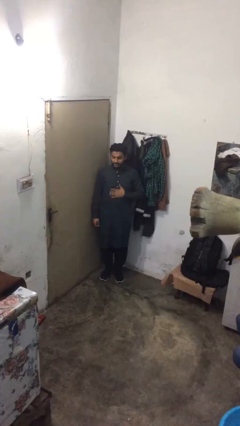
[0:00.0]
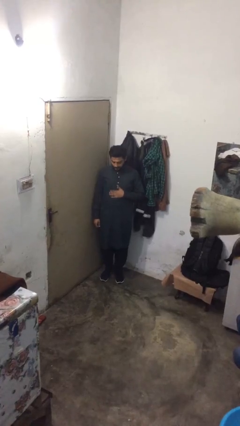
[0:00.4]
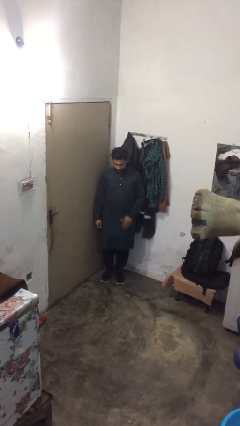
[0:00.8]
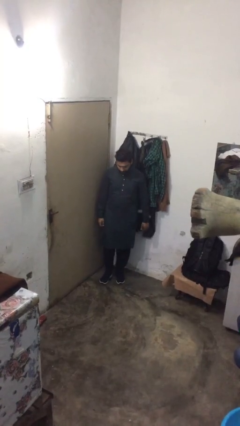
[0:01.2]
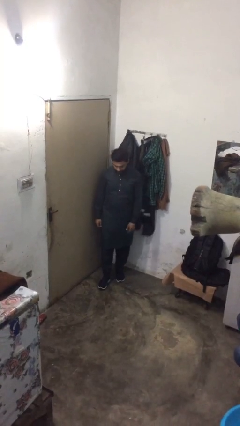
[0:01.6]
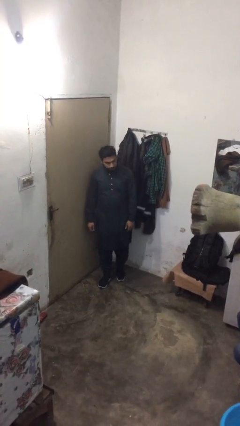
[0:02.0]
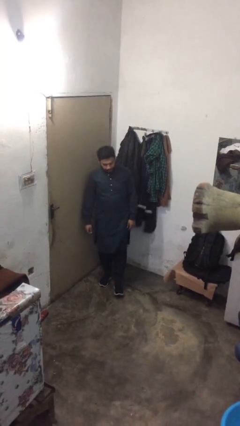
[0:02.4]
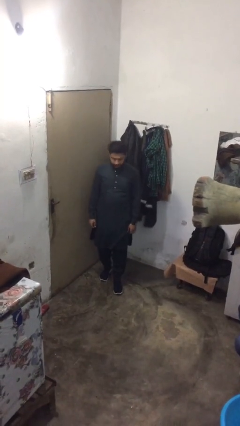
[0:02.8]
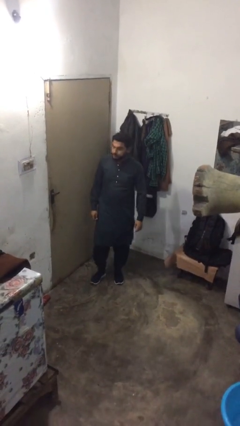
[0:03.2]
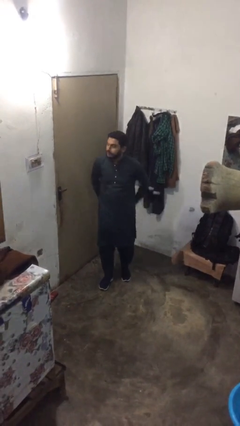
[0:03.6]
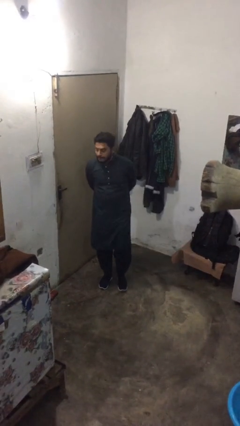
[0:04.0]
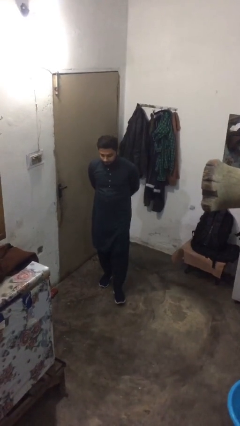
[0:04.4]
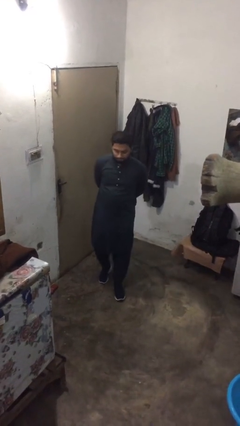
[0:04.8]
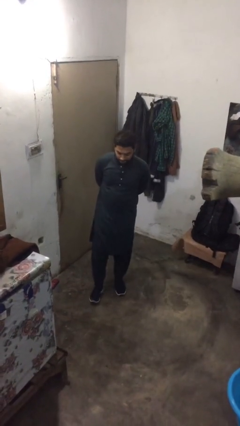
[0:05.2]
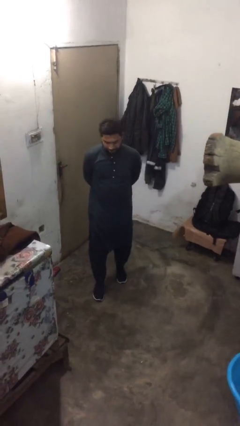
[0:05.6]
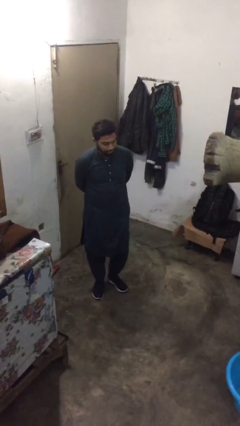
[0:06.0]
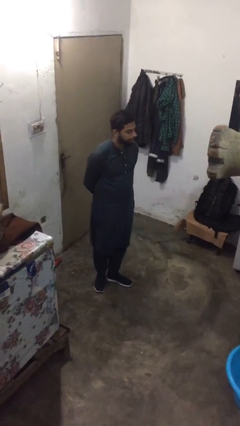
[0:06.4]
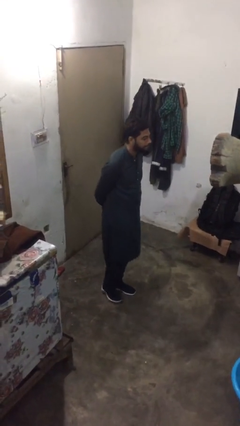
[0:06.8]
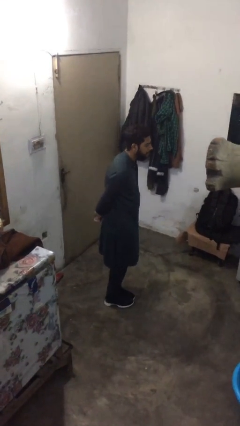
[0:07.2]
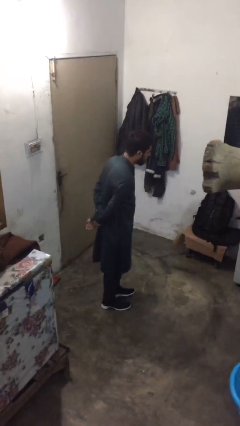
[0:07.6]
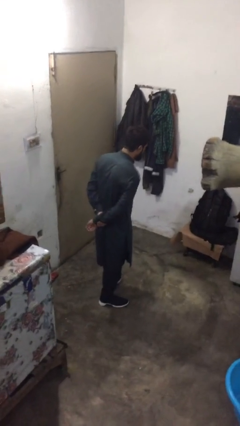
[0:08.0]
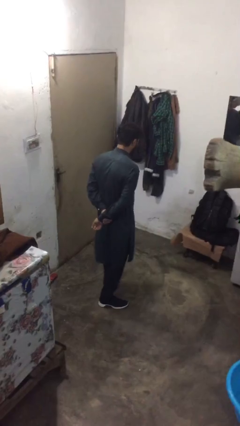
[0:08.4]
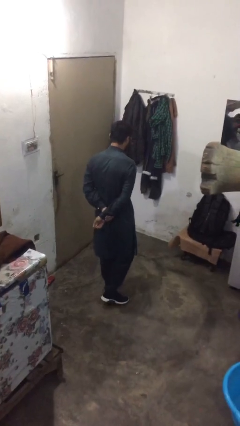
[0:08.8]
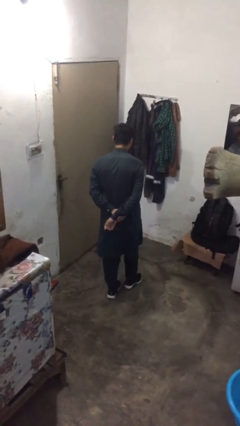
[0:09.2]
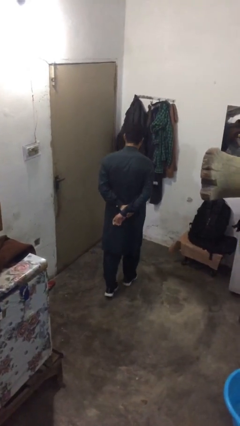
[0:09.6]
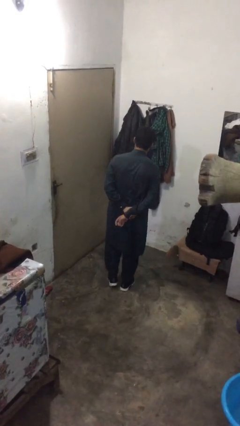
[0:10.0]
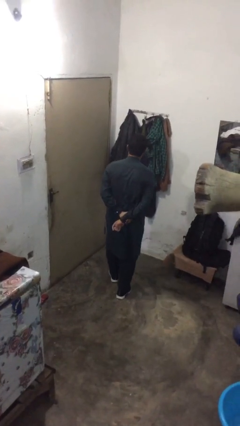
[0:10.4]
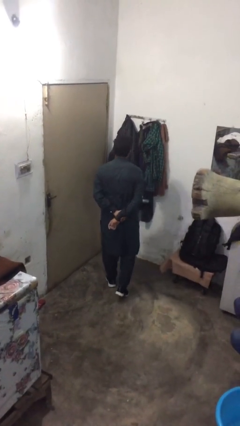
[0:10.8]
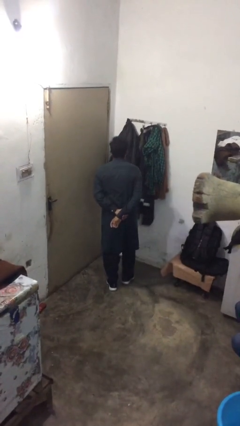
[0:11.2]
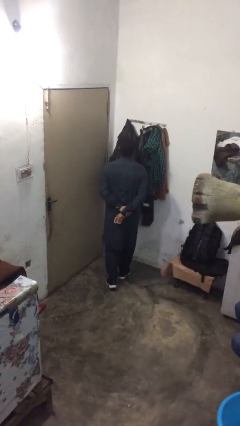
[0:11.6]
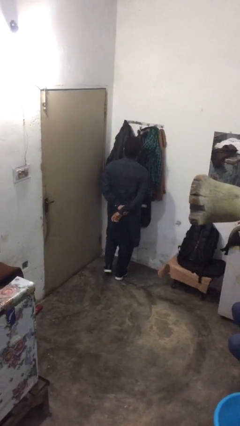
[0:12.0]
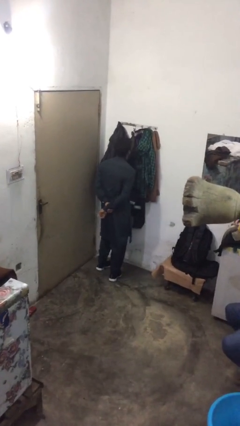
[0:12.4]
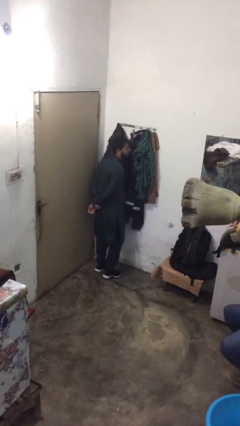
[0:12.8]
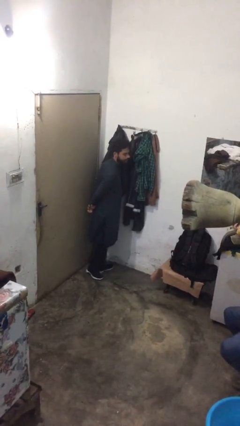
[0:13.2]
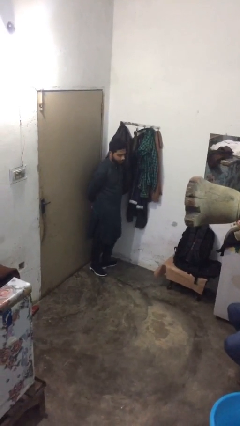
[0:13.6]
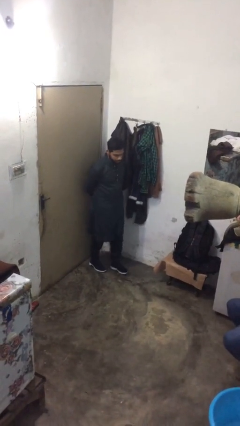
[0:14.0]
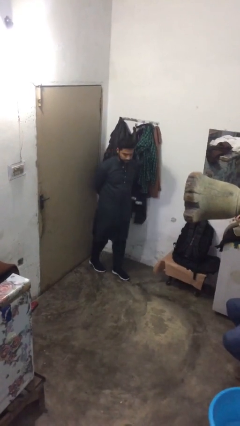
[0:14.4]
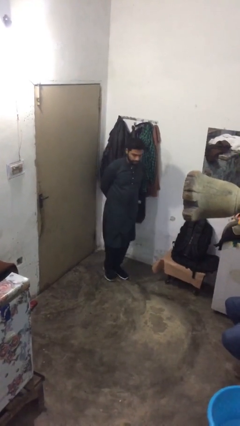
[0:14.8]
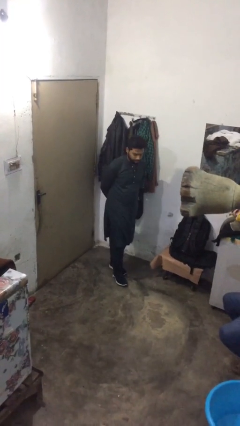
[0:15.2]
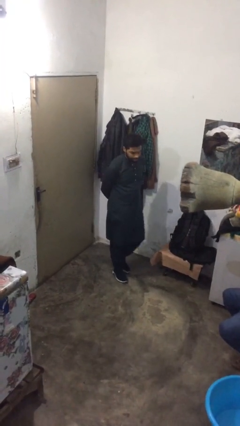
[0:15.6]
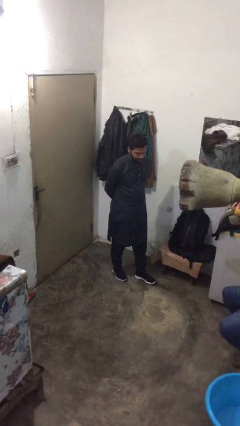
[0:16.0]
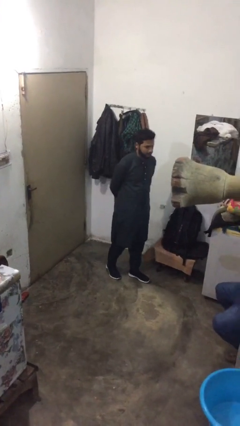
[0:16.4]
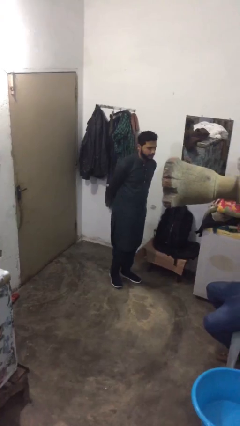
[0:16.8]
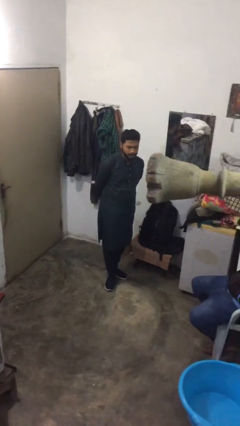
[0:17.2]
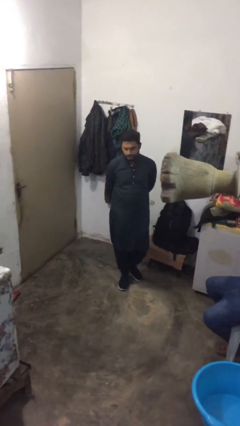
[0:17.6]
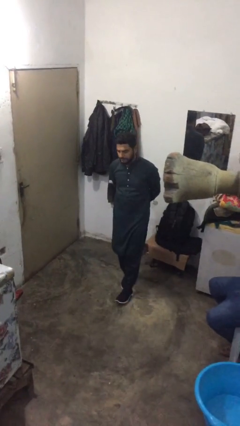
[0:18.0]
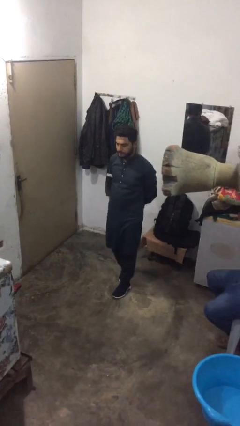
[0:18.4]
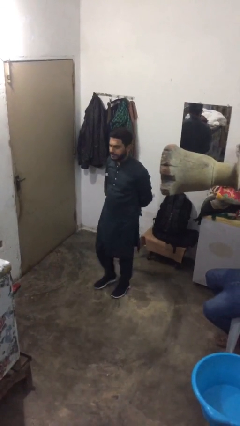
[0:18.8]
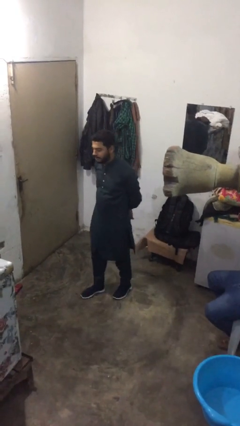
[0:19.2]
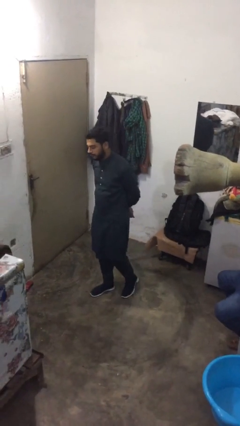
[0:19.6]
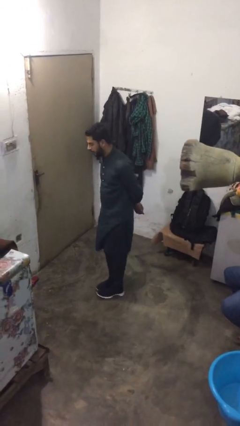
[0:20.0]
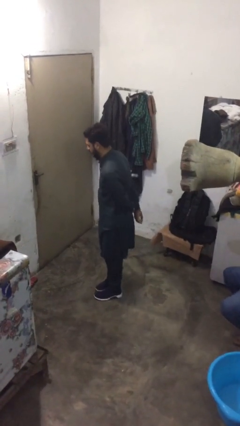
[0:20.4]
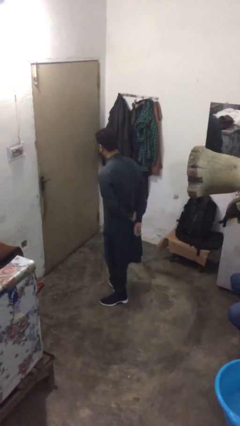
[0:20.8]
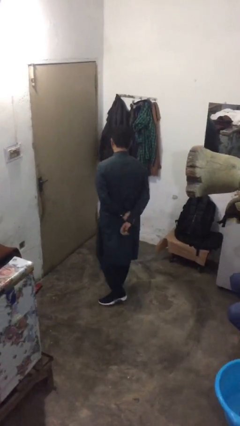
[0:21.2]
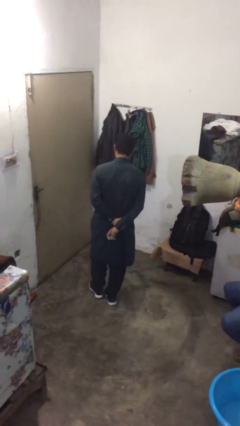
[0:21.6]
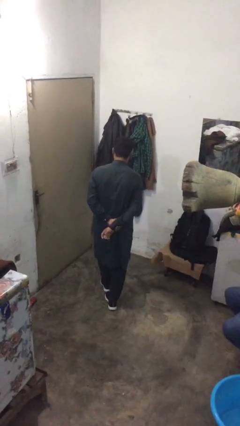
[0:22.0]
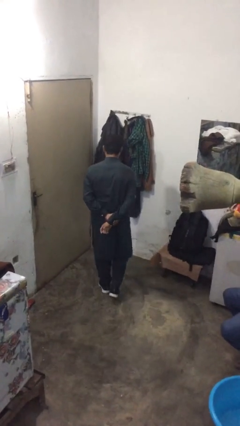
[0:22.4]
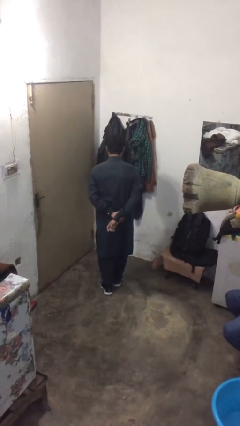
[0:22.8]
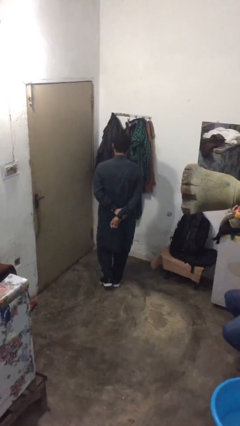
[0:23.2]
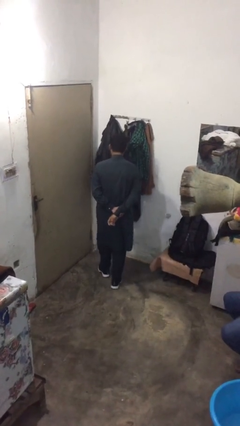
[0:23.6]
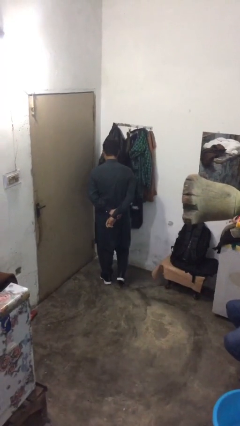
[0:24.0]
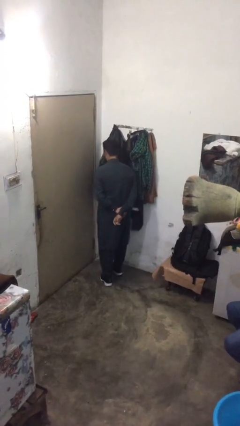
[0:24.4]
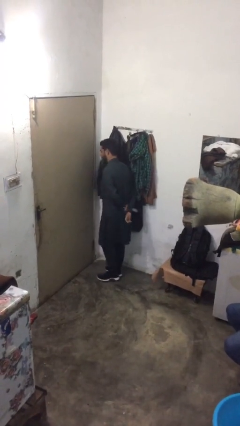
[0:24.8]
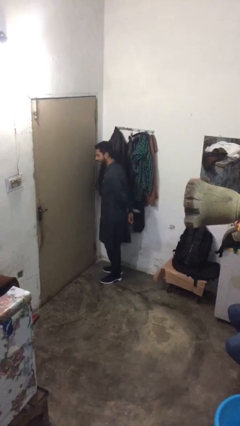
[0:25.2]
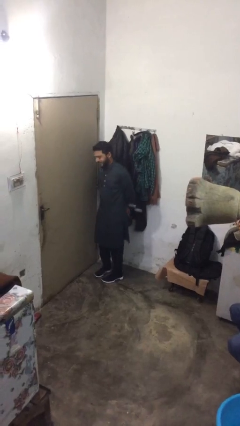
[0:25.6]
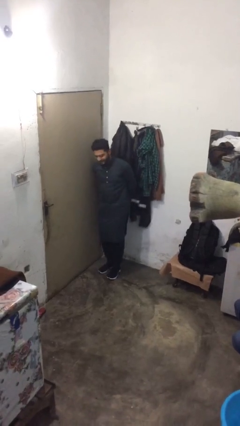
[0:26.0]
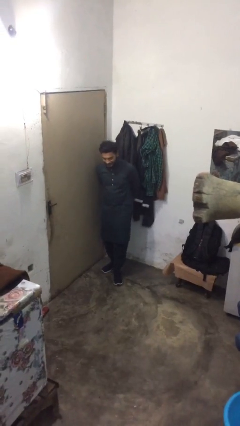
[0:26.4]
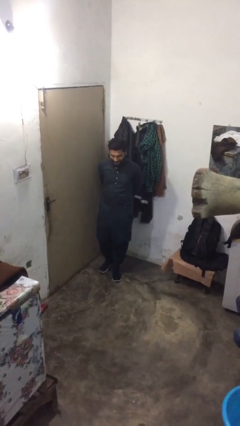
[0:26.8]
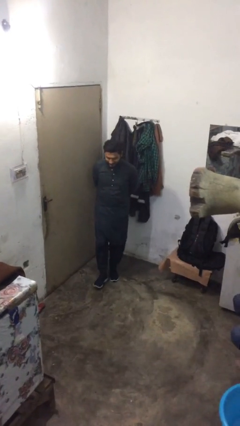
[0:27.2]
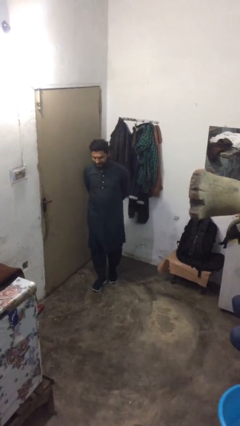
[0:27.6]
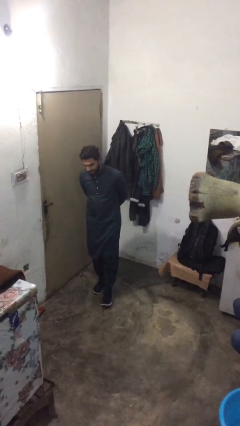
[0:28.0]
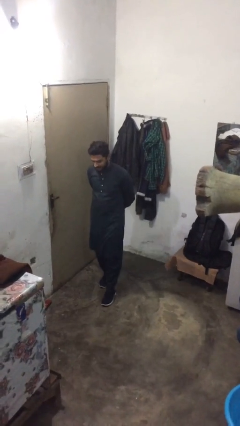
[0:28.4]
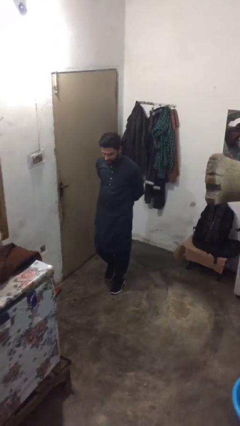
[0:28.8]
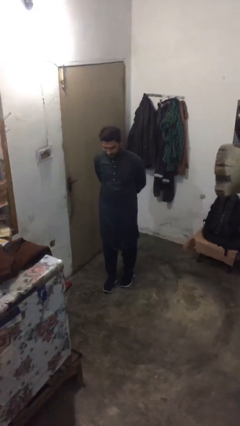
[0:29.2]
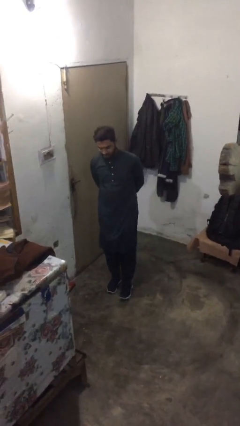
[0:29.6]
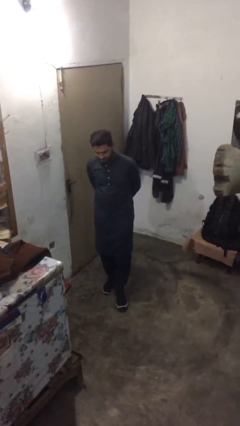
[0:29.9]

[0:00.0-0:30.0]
person walks

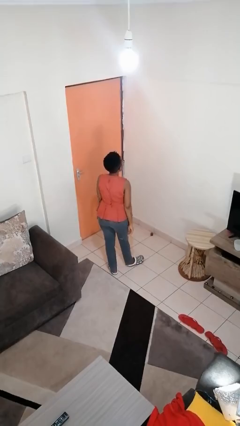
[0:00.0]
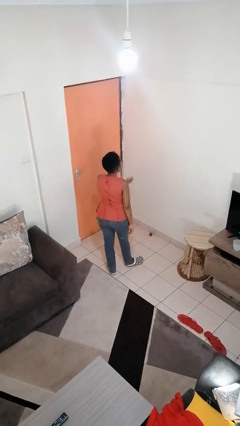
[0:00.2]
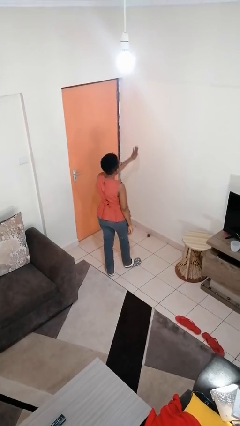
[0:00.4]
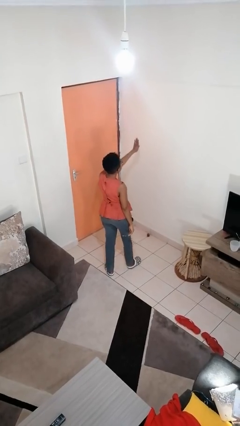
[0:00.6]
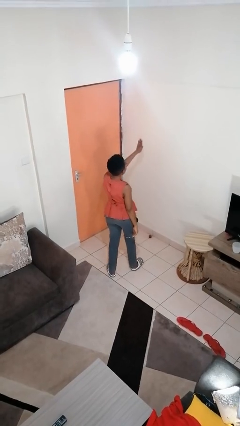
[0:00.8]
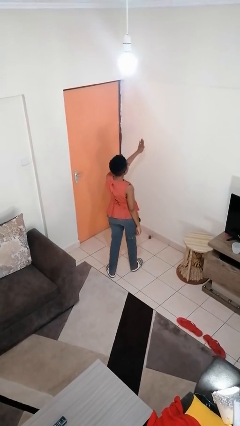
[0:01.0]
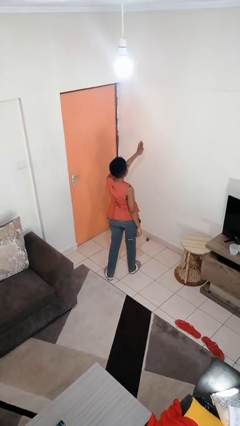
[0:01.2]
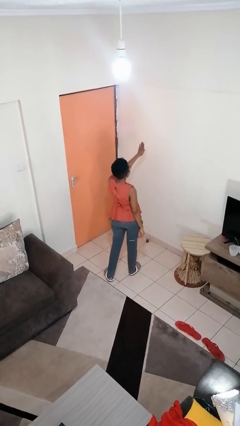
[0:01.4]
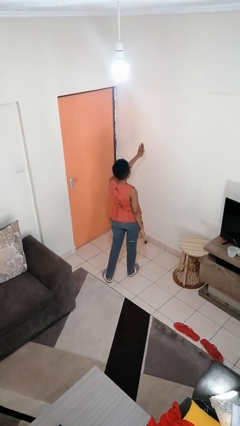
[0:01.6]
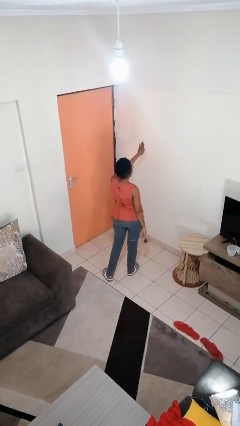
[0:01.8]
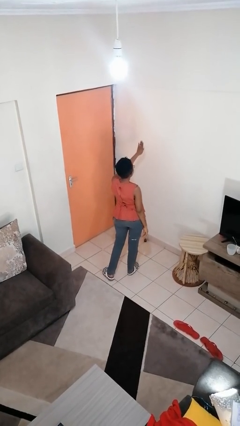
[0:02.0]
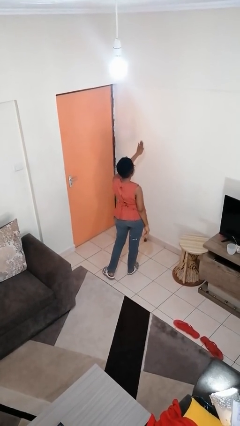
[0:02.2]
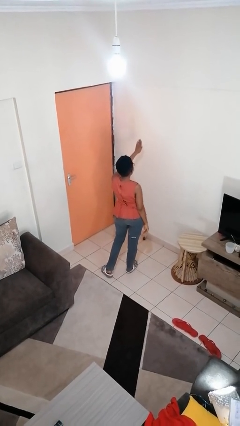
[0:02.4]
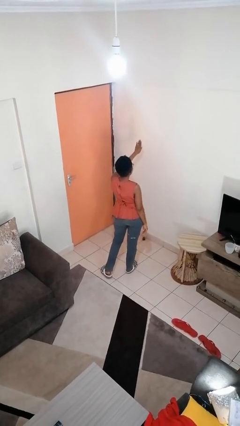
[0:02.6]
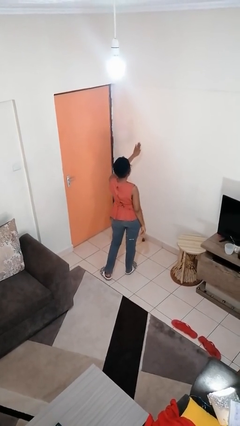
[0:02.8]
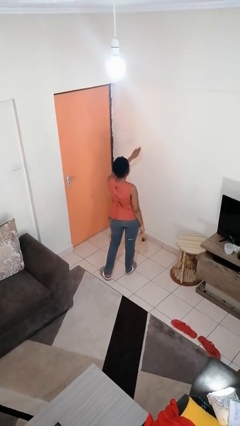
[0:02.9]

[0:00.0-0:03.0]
person gestures stop
